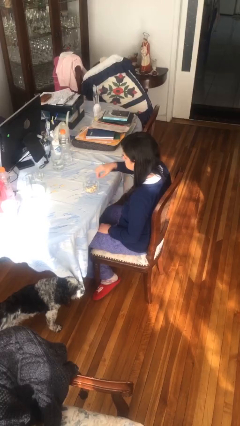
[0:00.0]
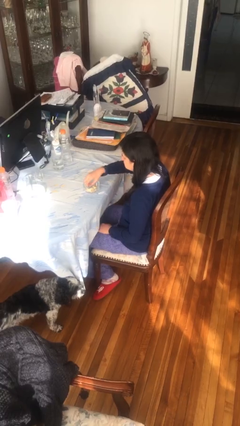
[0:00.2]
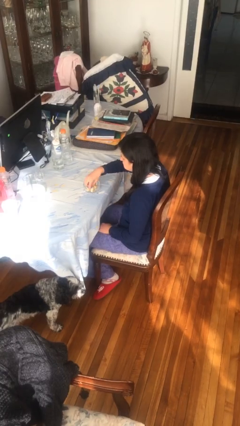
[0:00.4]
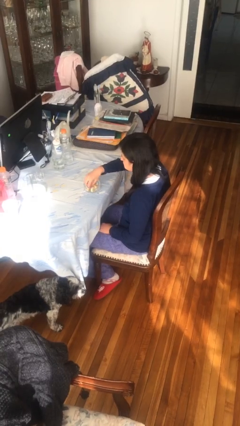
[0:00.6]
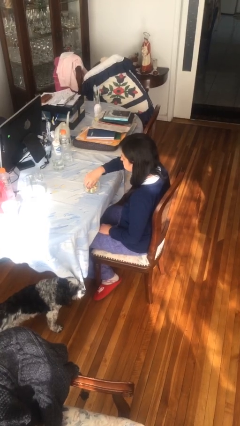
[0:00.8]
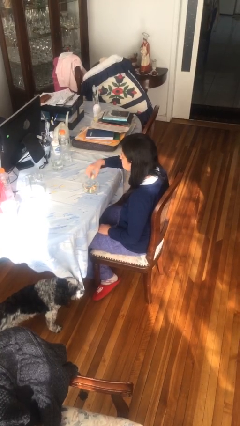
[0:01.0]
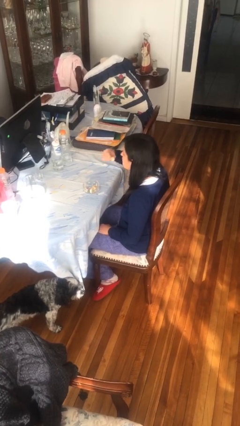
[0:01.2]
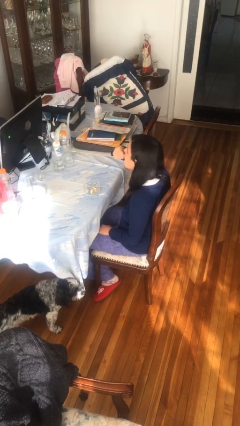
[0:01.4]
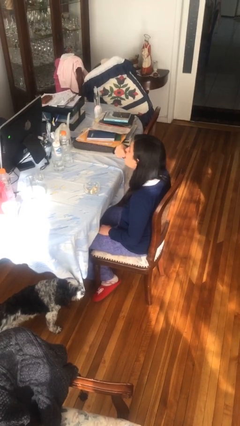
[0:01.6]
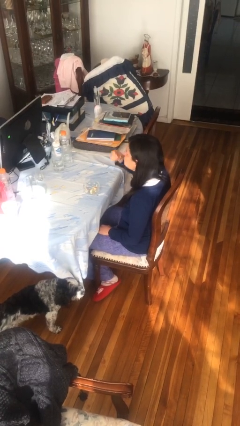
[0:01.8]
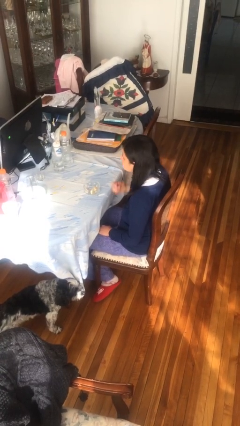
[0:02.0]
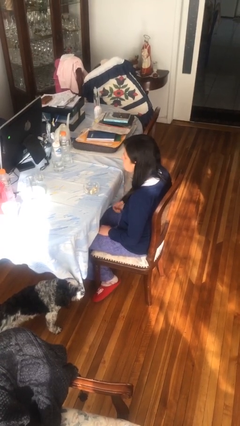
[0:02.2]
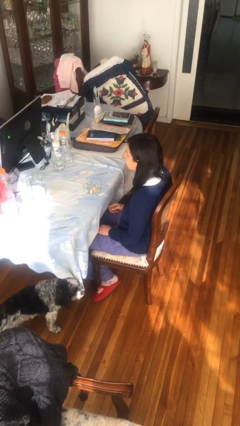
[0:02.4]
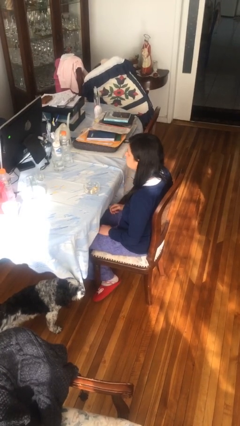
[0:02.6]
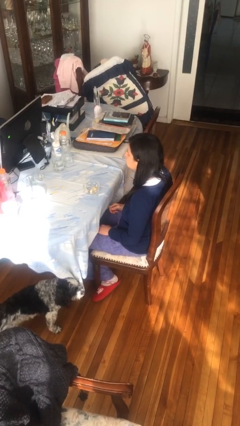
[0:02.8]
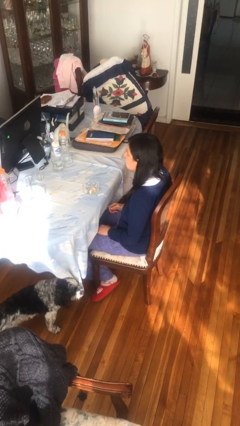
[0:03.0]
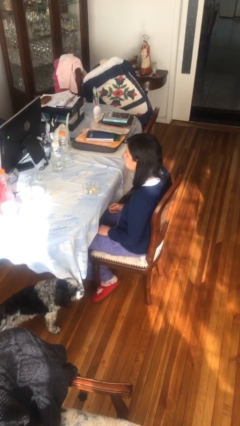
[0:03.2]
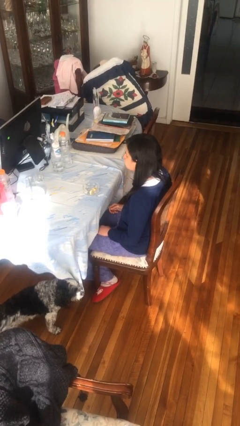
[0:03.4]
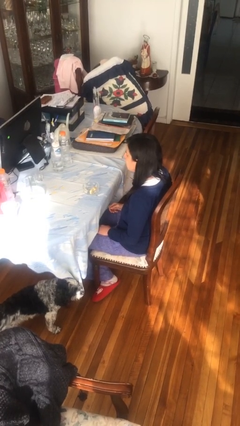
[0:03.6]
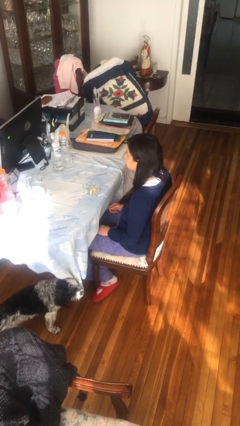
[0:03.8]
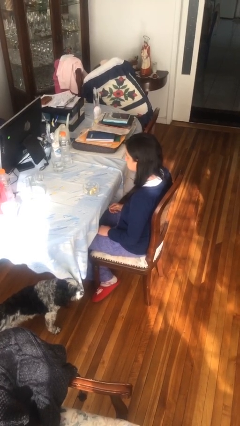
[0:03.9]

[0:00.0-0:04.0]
person eats with hands

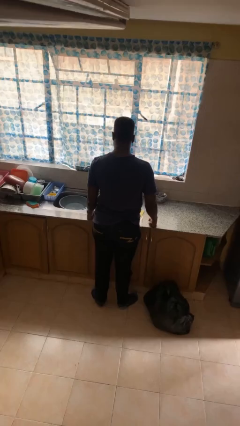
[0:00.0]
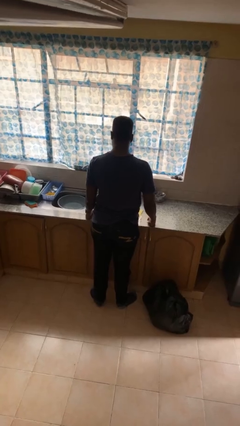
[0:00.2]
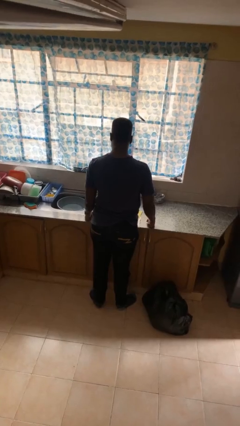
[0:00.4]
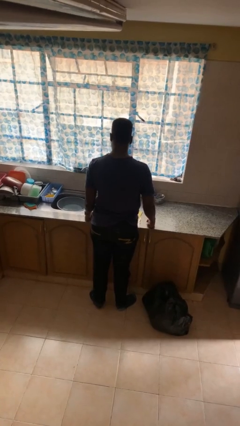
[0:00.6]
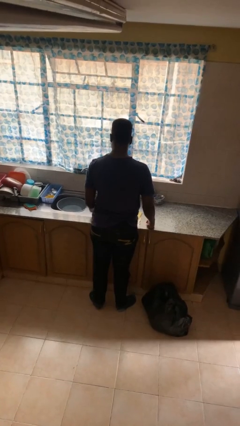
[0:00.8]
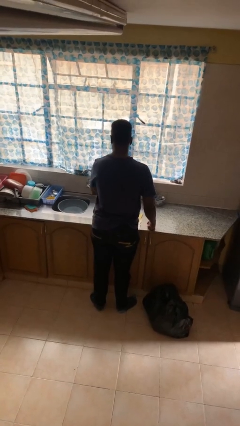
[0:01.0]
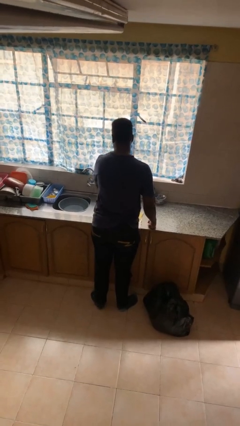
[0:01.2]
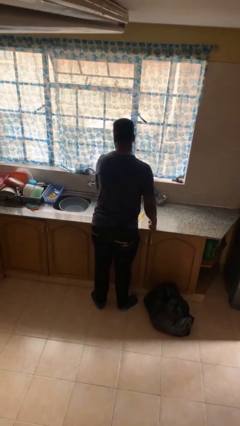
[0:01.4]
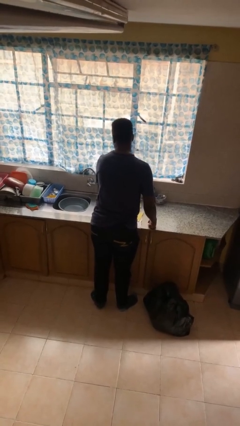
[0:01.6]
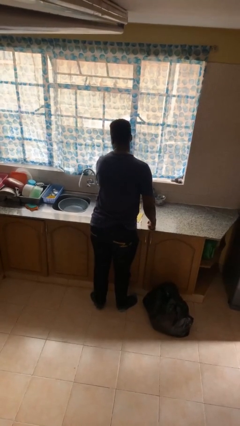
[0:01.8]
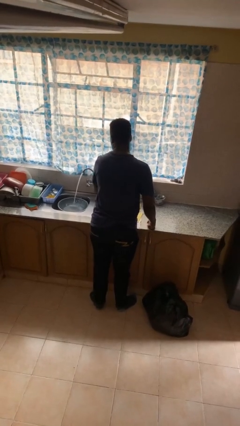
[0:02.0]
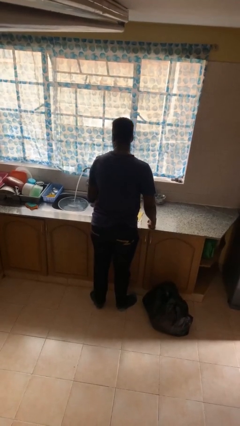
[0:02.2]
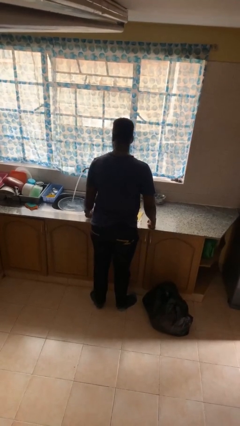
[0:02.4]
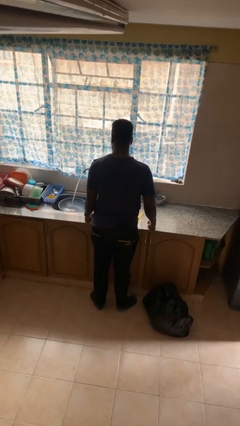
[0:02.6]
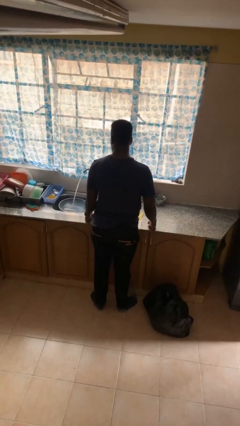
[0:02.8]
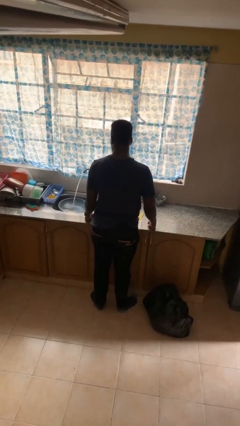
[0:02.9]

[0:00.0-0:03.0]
person turns on faucet

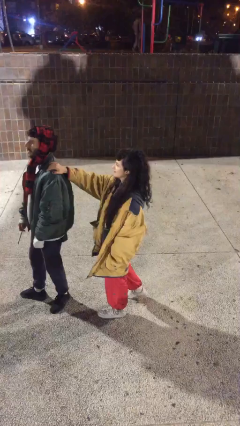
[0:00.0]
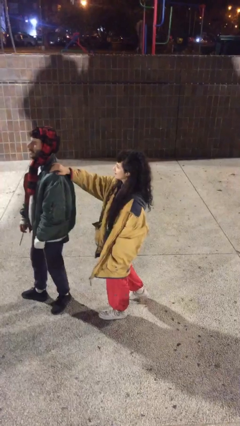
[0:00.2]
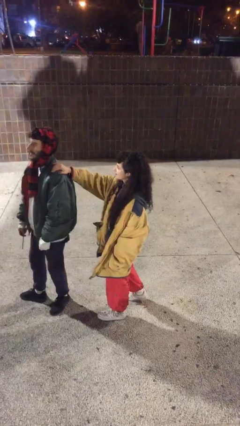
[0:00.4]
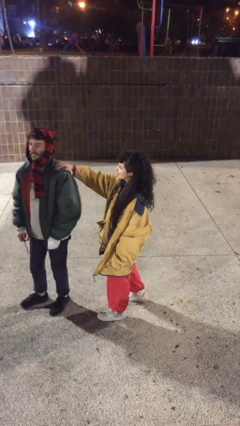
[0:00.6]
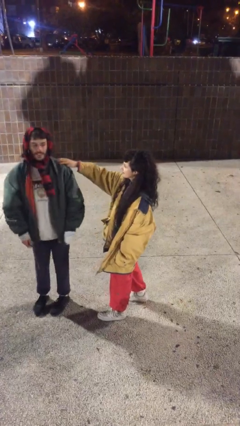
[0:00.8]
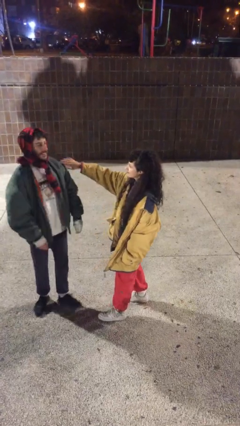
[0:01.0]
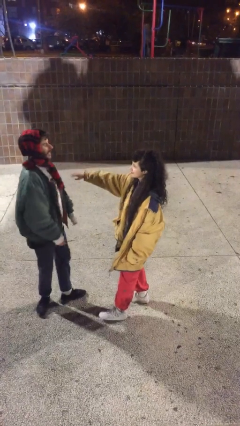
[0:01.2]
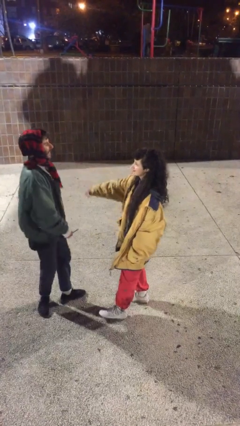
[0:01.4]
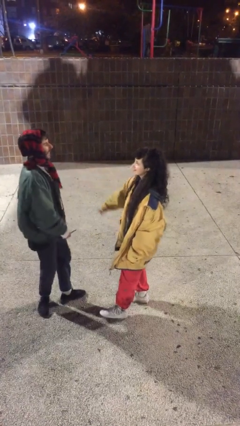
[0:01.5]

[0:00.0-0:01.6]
person spins person around

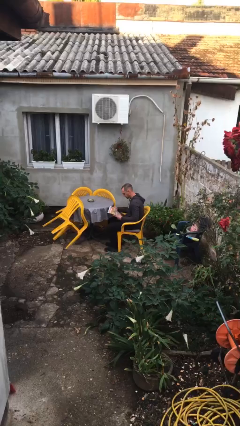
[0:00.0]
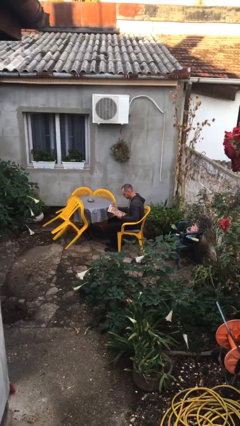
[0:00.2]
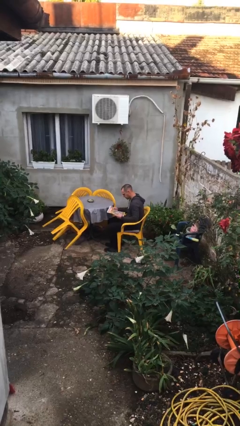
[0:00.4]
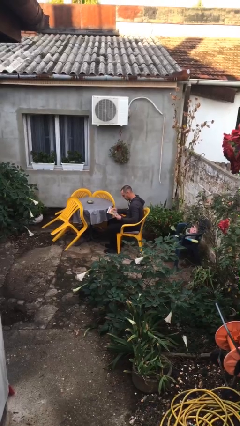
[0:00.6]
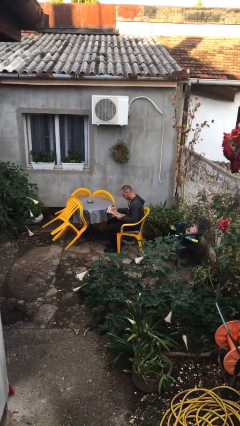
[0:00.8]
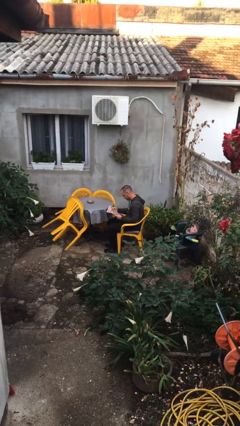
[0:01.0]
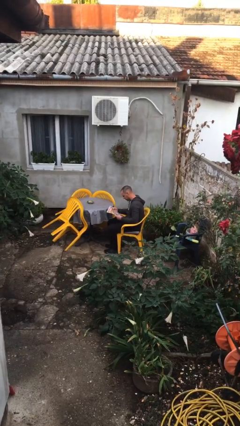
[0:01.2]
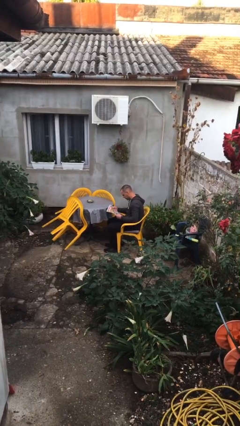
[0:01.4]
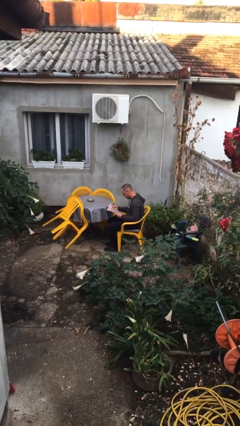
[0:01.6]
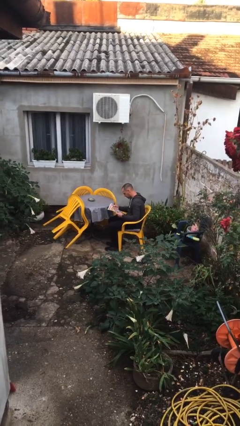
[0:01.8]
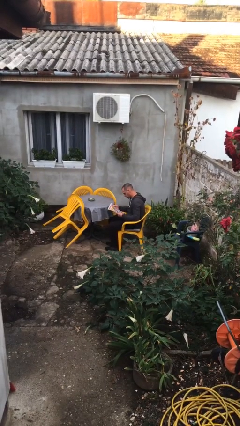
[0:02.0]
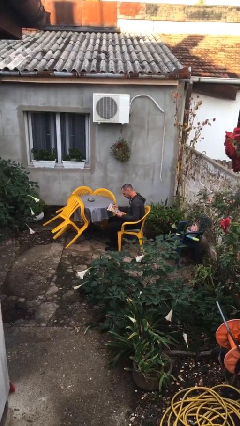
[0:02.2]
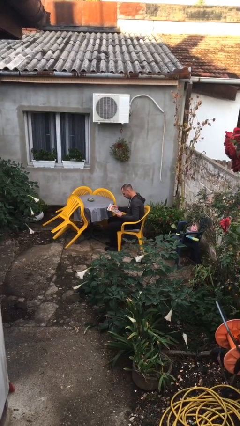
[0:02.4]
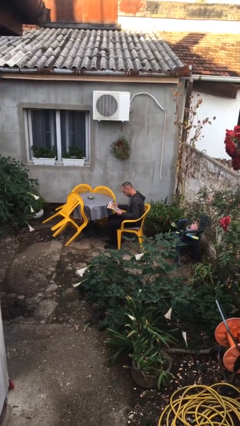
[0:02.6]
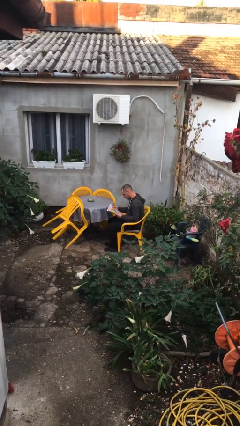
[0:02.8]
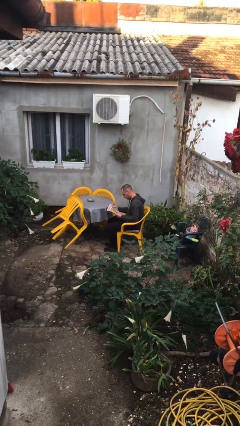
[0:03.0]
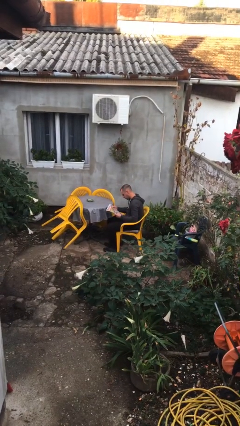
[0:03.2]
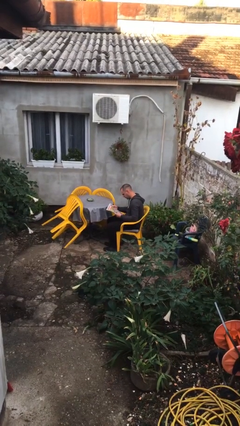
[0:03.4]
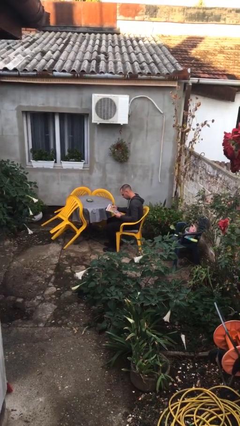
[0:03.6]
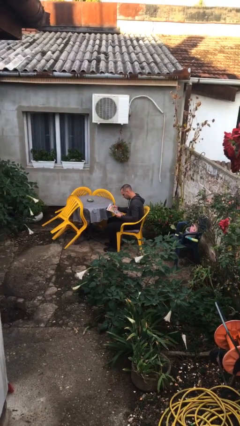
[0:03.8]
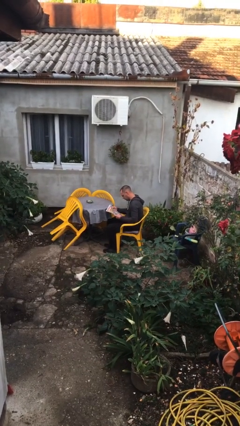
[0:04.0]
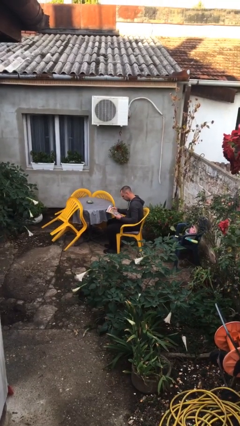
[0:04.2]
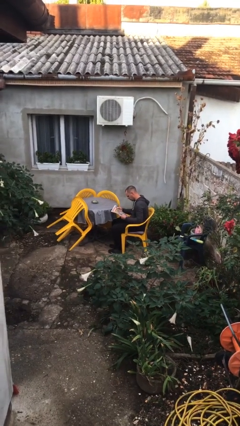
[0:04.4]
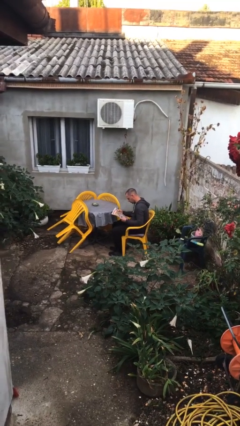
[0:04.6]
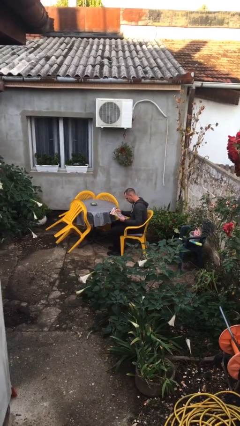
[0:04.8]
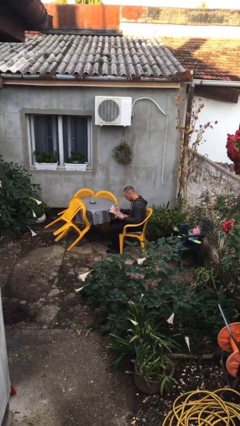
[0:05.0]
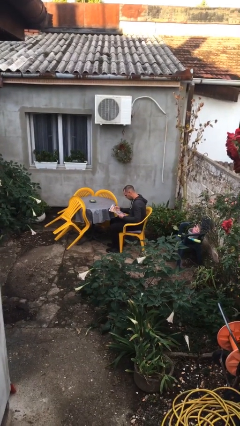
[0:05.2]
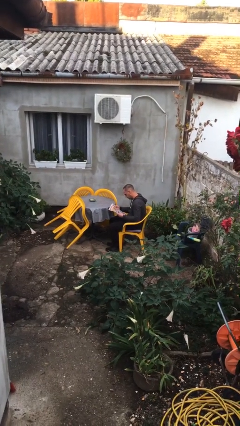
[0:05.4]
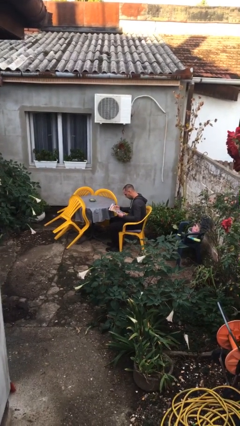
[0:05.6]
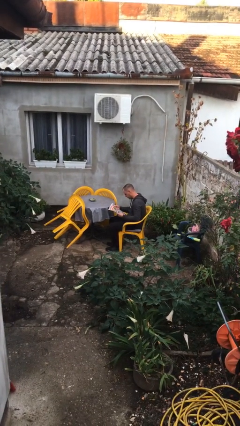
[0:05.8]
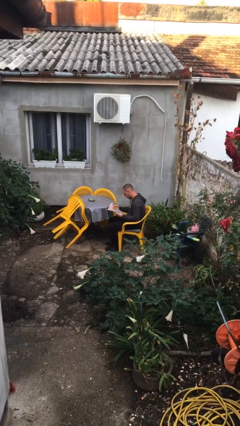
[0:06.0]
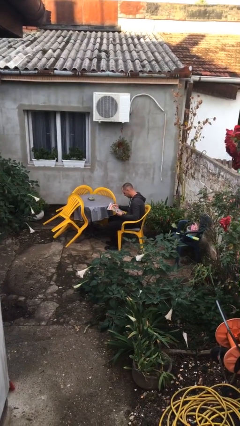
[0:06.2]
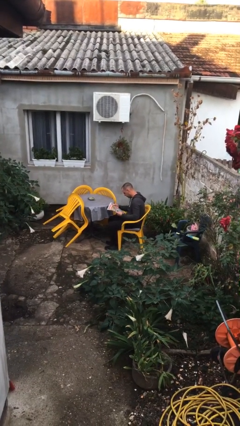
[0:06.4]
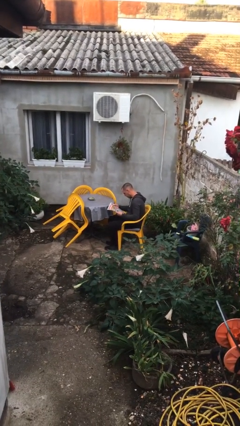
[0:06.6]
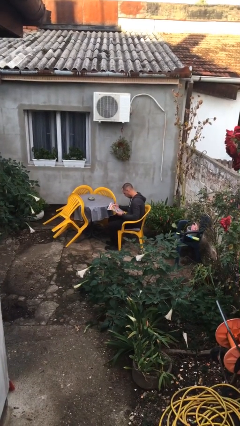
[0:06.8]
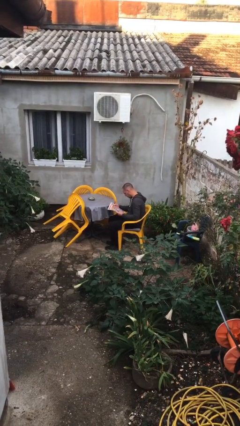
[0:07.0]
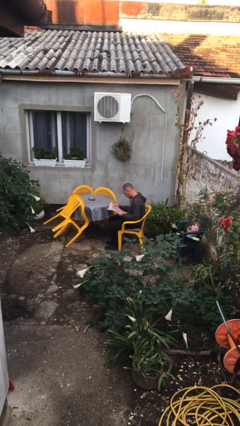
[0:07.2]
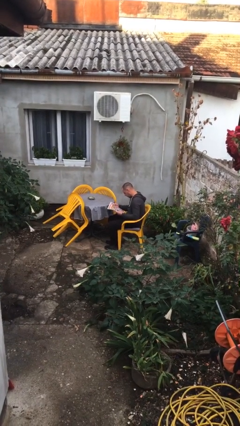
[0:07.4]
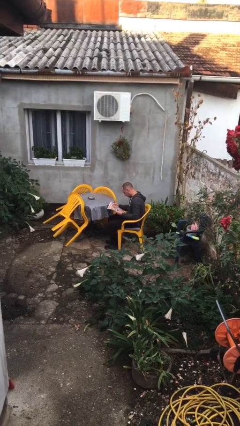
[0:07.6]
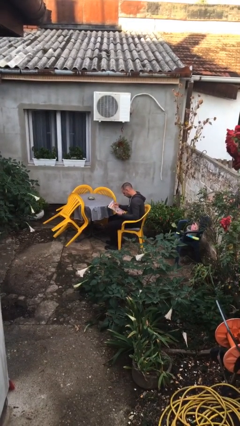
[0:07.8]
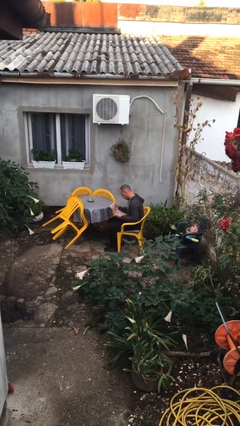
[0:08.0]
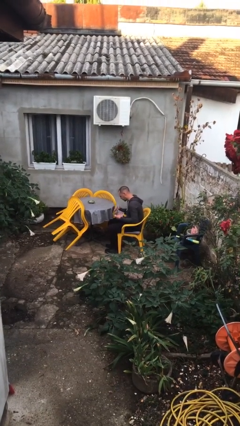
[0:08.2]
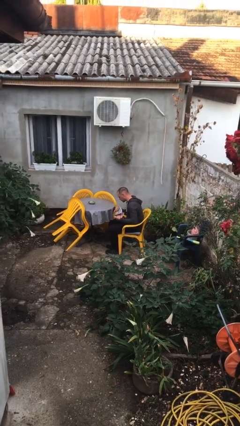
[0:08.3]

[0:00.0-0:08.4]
person reads document

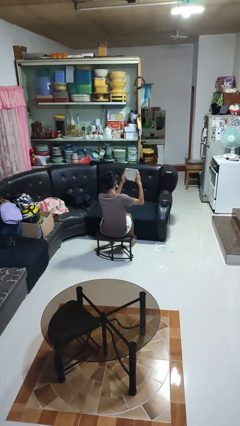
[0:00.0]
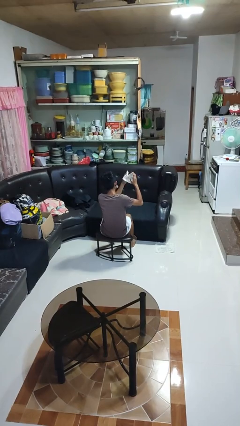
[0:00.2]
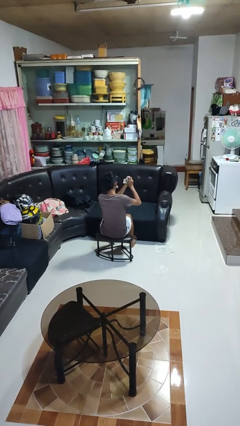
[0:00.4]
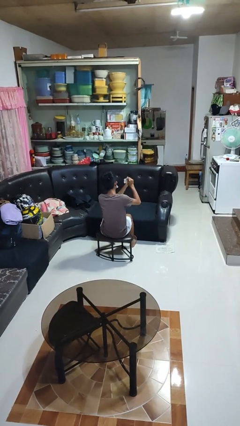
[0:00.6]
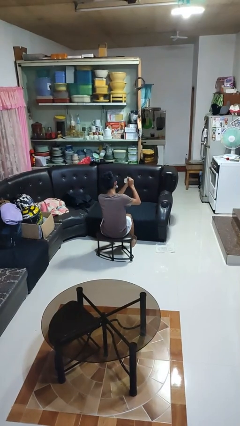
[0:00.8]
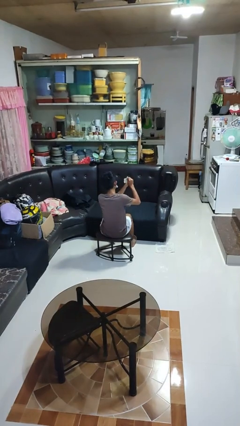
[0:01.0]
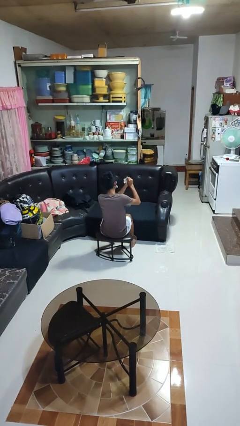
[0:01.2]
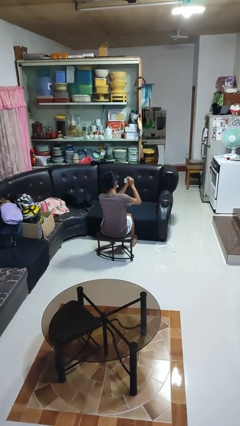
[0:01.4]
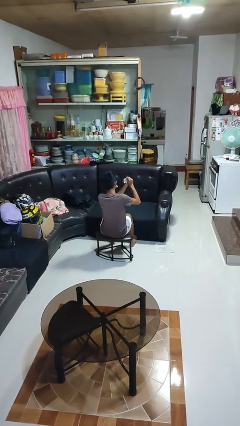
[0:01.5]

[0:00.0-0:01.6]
person crumples paper
